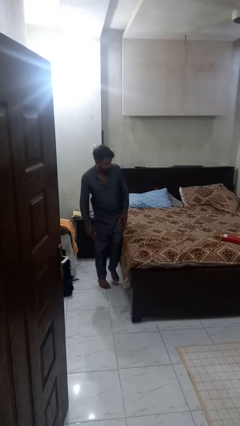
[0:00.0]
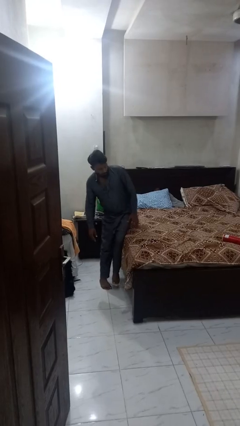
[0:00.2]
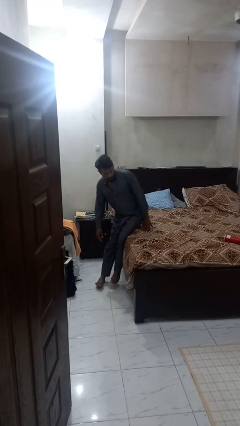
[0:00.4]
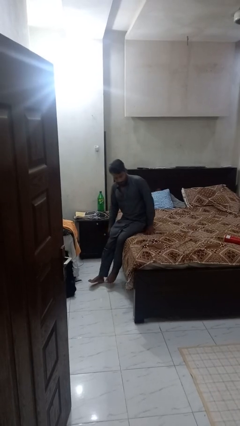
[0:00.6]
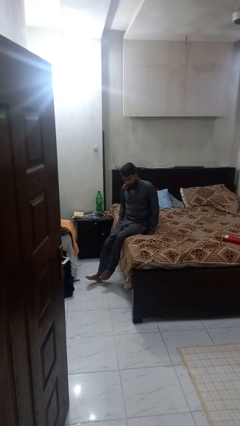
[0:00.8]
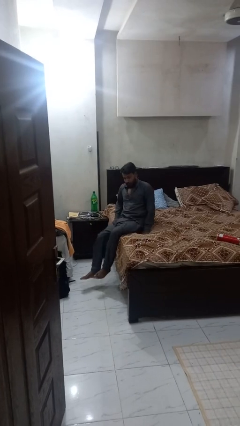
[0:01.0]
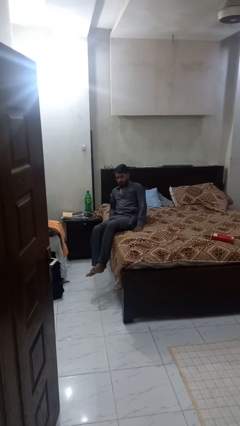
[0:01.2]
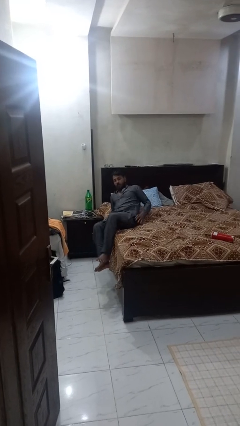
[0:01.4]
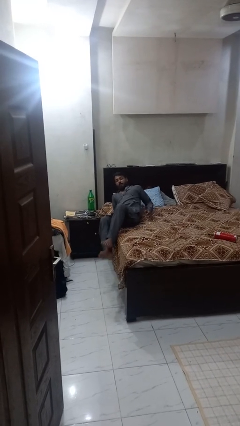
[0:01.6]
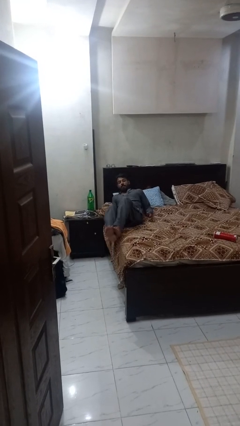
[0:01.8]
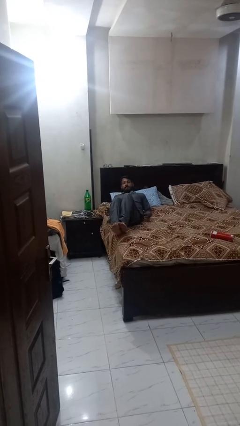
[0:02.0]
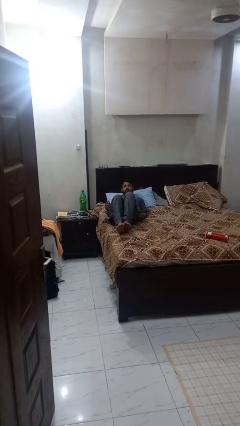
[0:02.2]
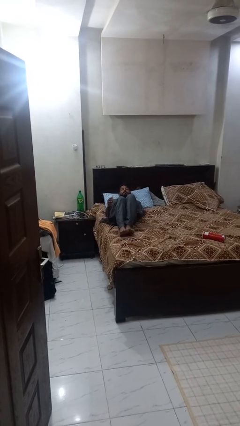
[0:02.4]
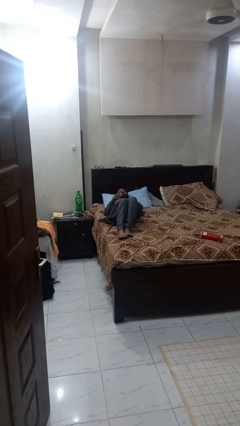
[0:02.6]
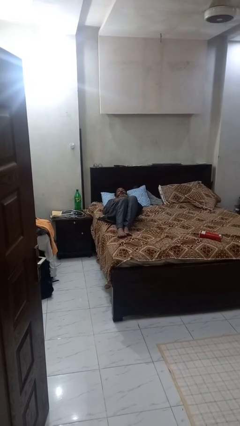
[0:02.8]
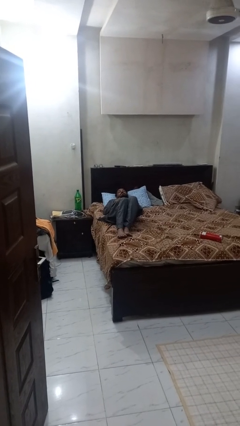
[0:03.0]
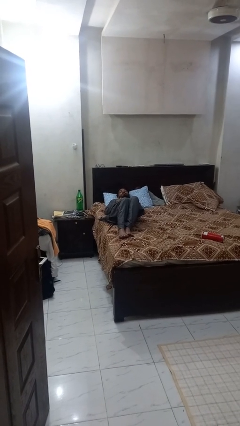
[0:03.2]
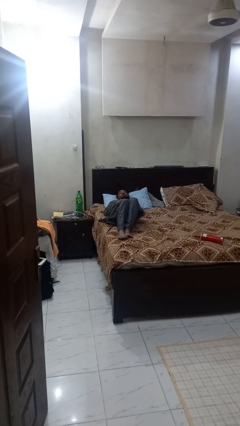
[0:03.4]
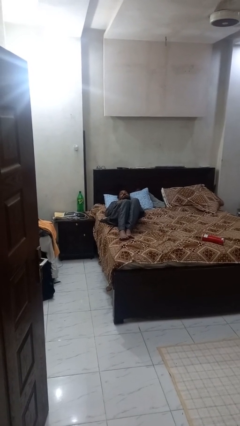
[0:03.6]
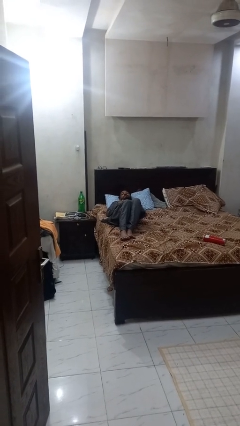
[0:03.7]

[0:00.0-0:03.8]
person lies down on bed

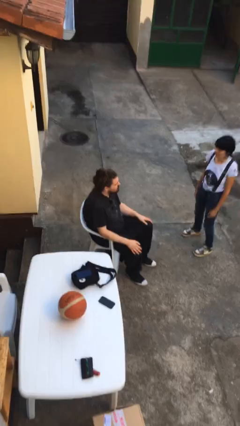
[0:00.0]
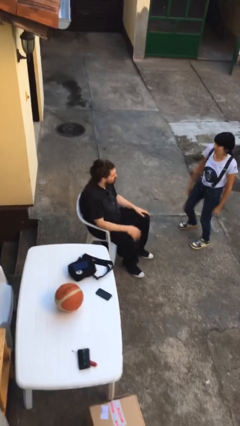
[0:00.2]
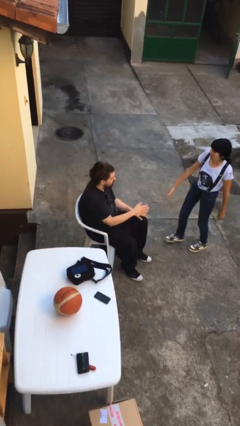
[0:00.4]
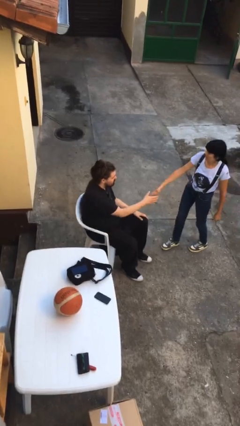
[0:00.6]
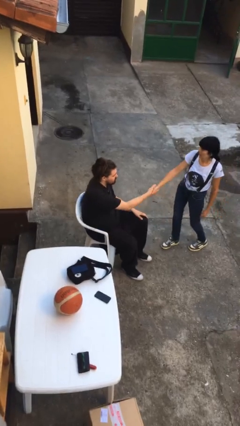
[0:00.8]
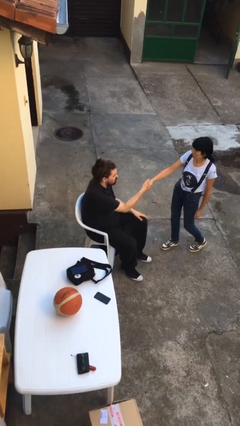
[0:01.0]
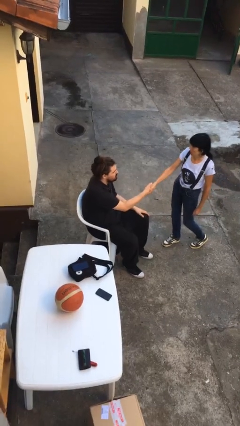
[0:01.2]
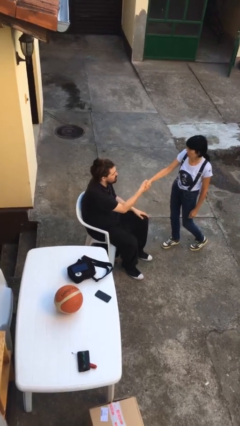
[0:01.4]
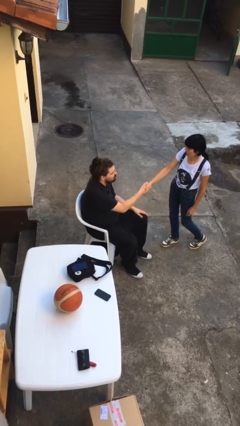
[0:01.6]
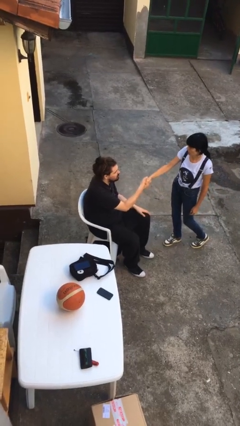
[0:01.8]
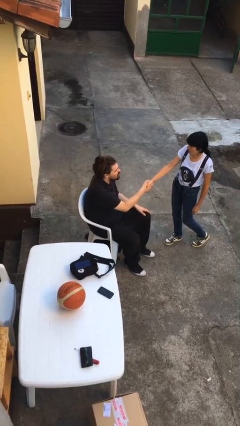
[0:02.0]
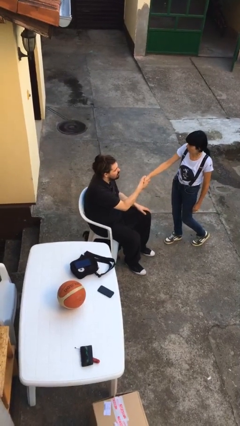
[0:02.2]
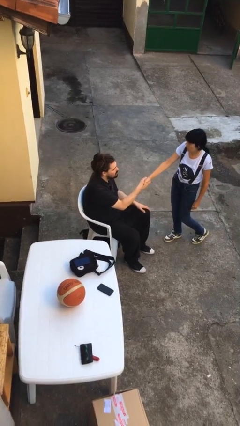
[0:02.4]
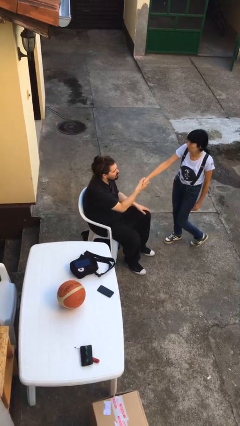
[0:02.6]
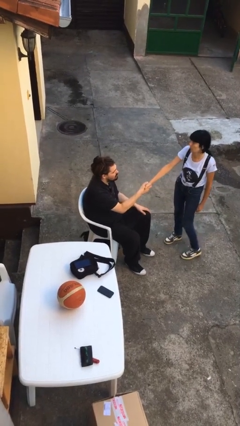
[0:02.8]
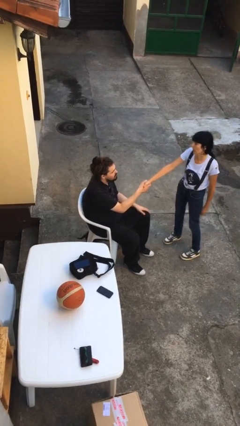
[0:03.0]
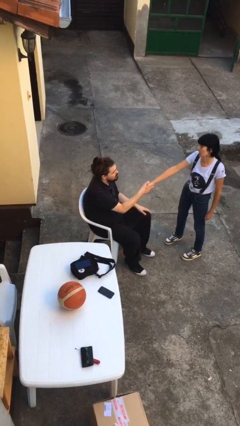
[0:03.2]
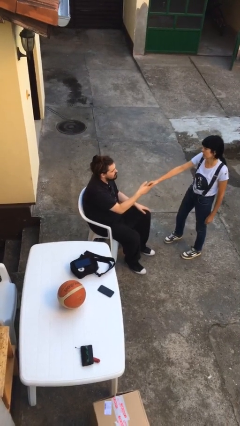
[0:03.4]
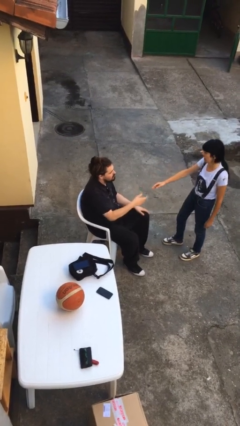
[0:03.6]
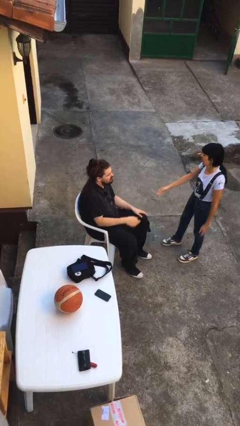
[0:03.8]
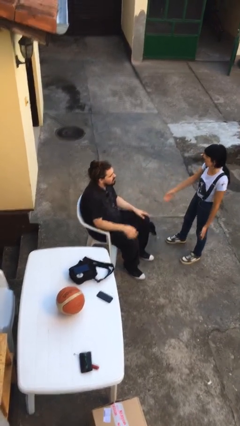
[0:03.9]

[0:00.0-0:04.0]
person shakes hand

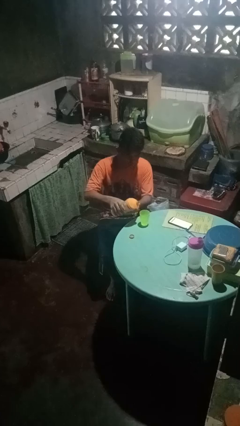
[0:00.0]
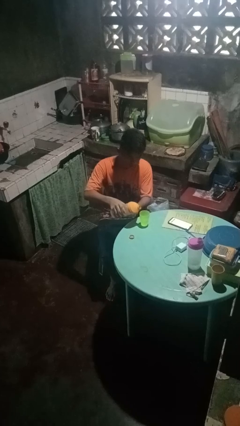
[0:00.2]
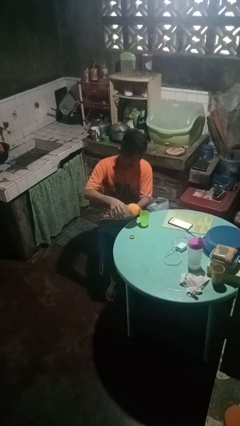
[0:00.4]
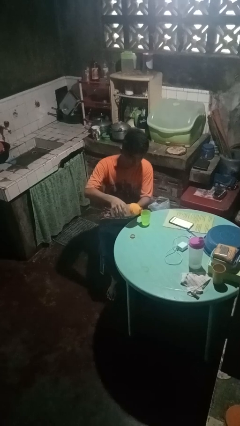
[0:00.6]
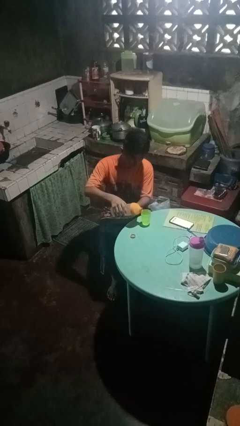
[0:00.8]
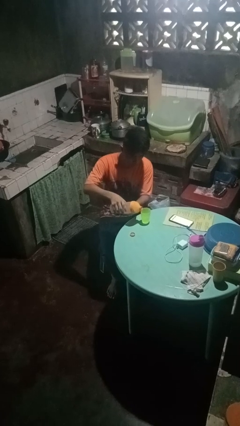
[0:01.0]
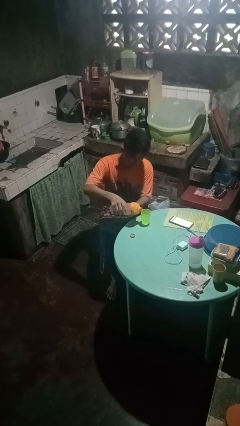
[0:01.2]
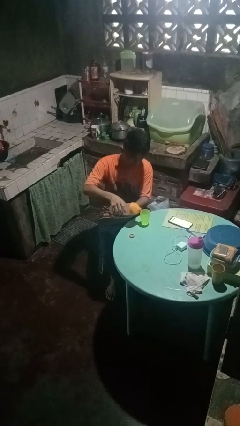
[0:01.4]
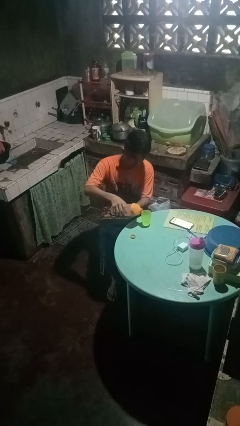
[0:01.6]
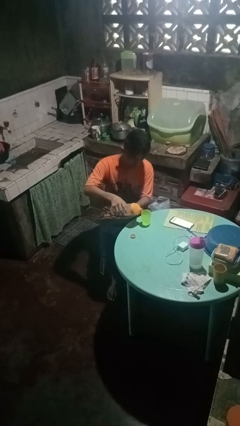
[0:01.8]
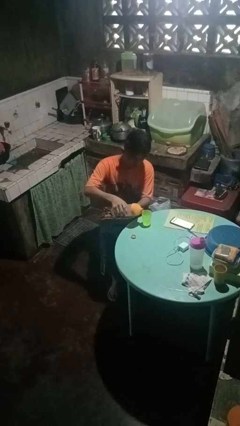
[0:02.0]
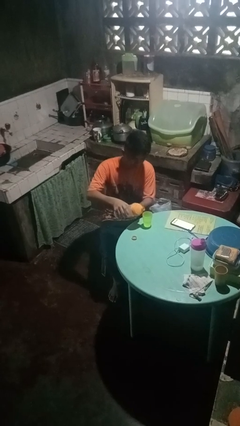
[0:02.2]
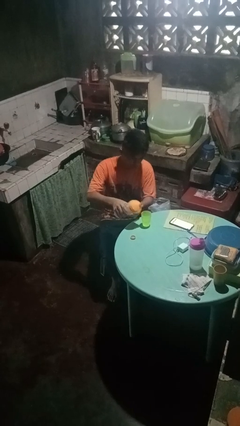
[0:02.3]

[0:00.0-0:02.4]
person pours liquid into cup

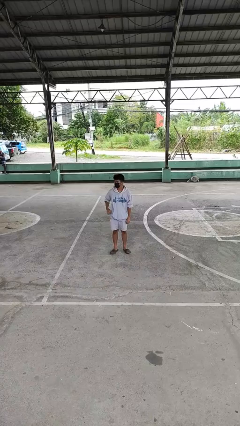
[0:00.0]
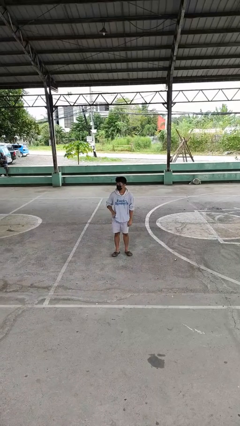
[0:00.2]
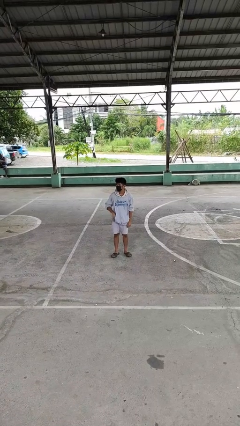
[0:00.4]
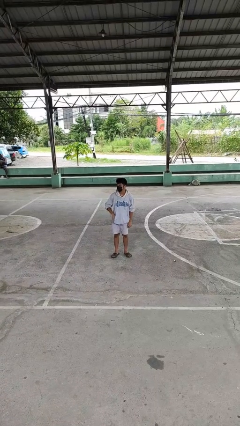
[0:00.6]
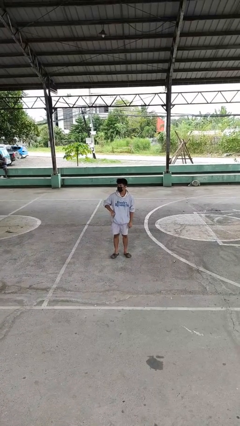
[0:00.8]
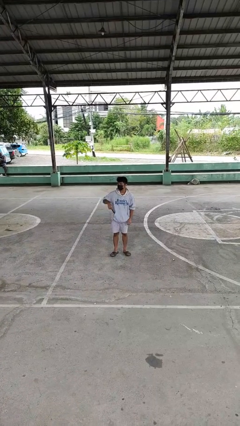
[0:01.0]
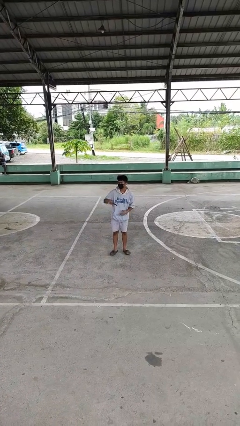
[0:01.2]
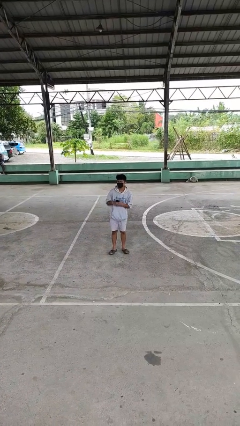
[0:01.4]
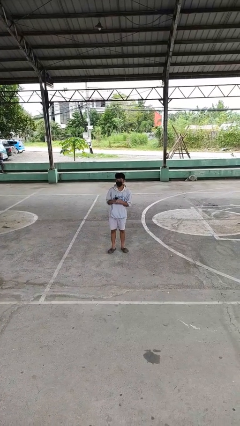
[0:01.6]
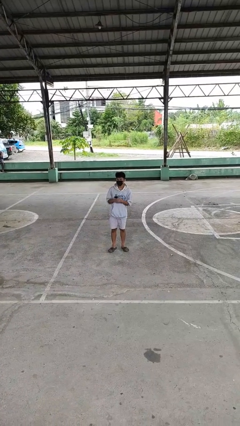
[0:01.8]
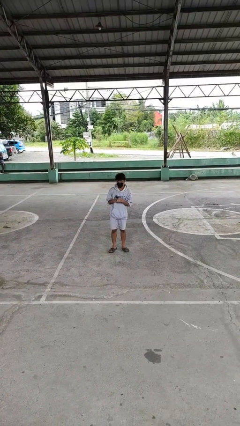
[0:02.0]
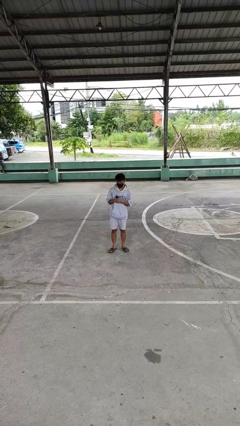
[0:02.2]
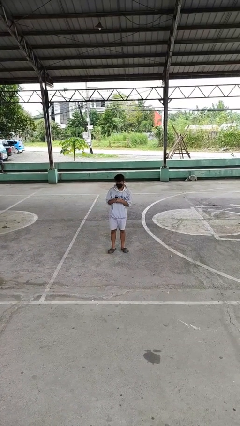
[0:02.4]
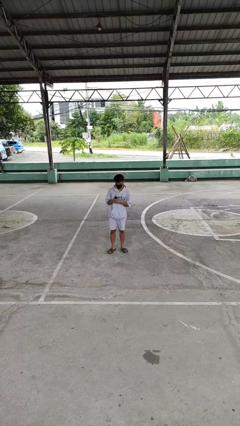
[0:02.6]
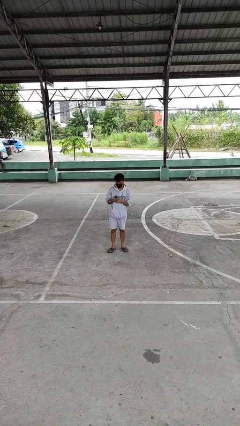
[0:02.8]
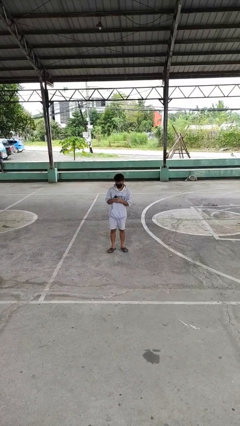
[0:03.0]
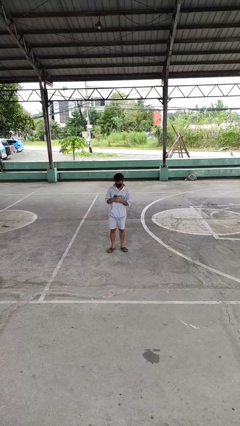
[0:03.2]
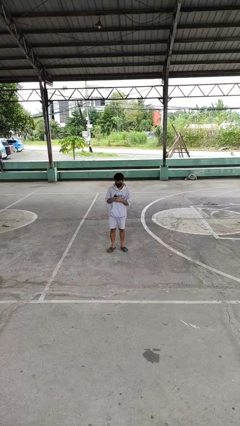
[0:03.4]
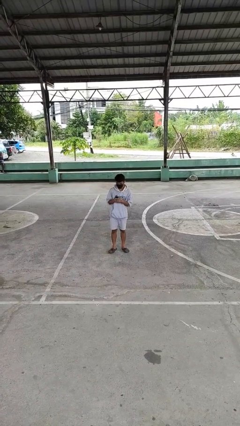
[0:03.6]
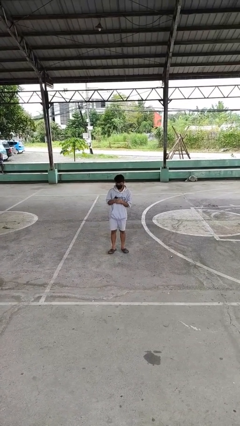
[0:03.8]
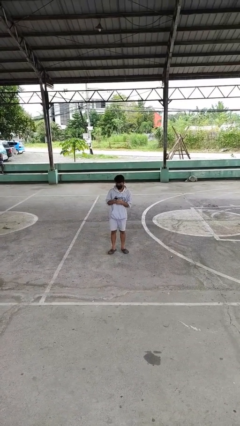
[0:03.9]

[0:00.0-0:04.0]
person takes phone from pocket

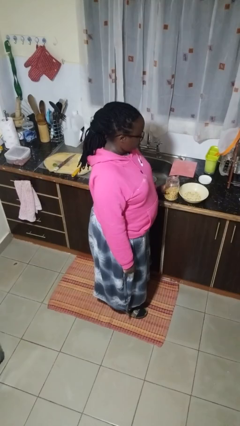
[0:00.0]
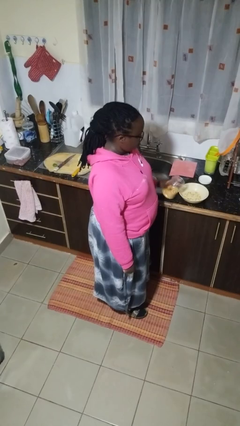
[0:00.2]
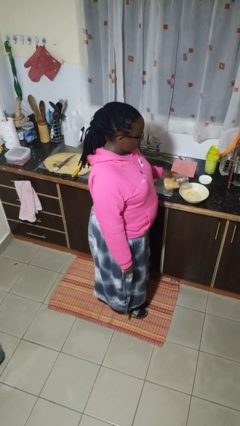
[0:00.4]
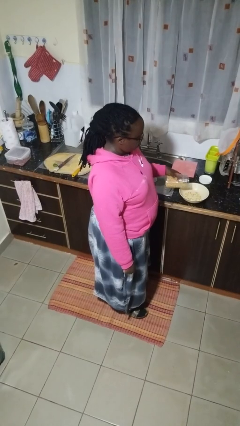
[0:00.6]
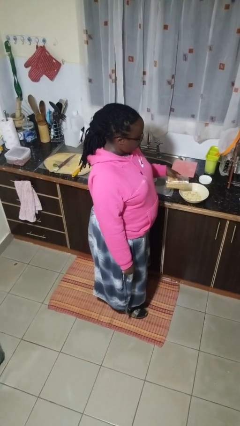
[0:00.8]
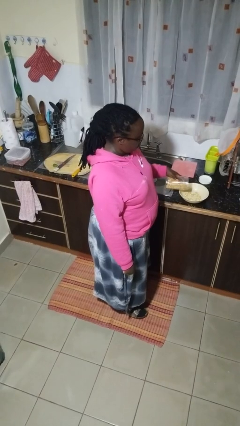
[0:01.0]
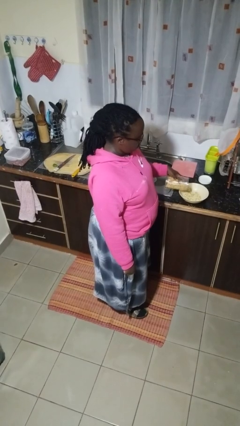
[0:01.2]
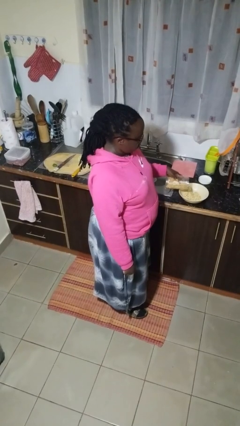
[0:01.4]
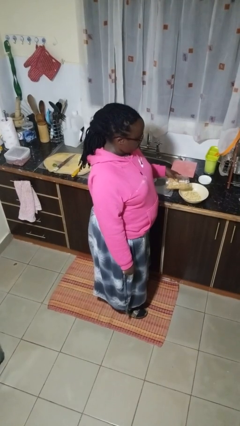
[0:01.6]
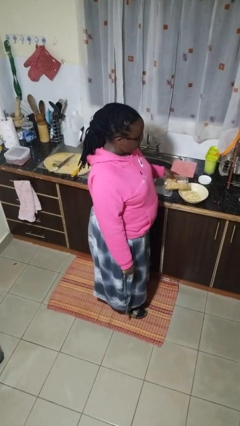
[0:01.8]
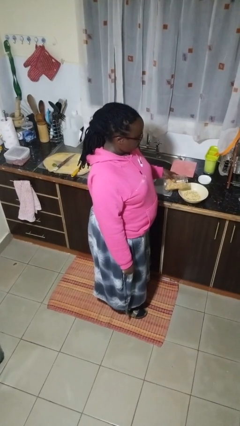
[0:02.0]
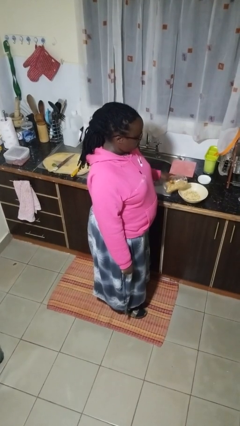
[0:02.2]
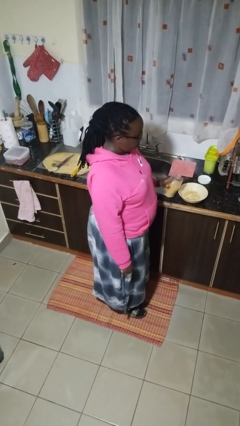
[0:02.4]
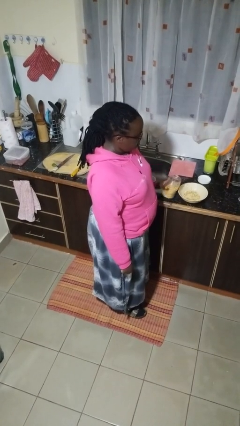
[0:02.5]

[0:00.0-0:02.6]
person pours into bowl

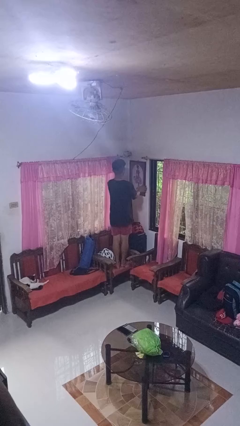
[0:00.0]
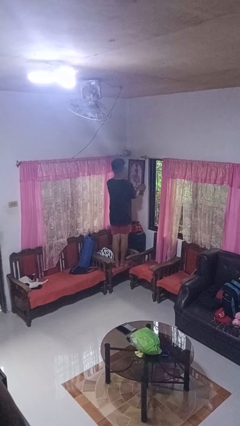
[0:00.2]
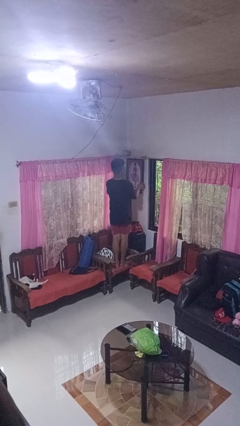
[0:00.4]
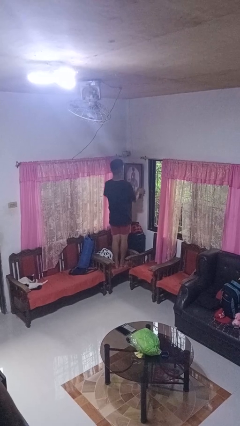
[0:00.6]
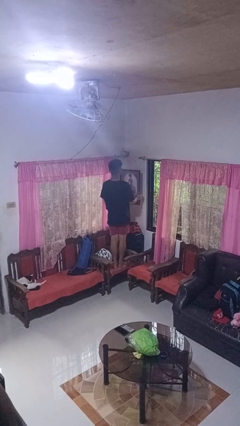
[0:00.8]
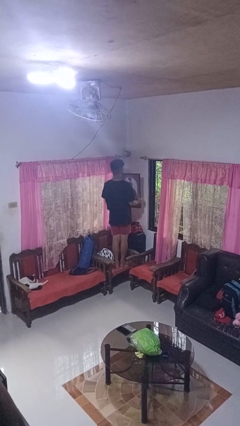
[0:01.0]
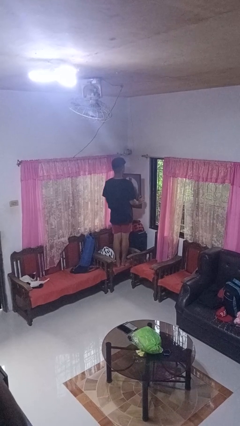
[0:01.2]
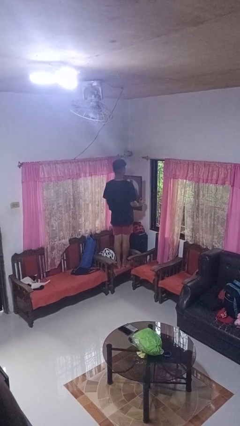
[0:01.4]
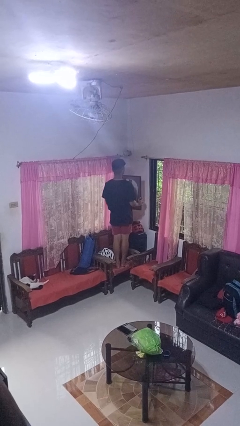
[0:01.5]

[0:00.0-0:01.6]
person takes down picture frame
